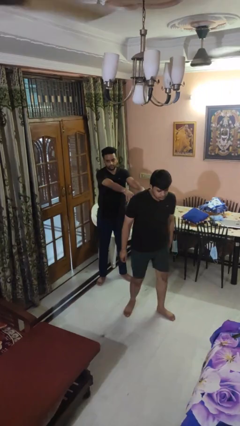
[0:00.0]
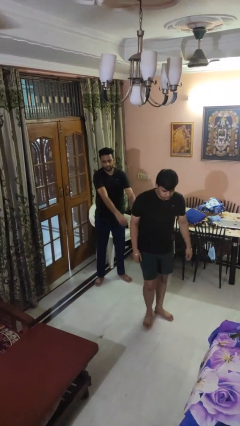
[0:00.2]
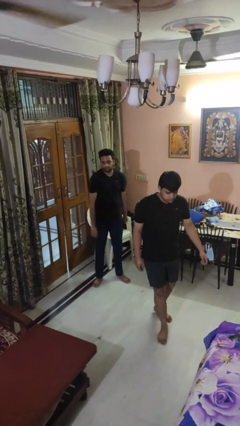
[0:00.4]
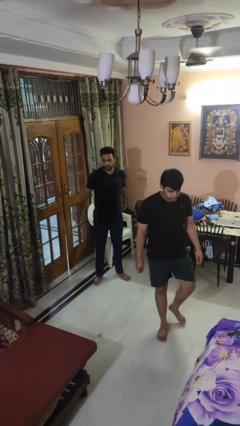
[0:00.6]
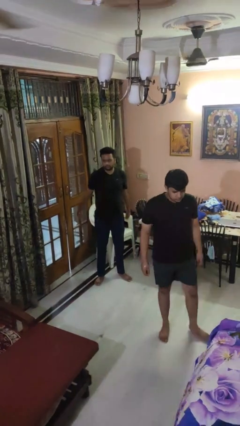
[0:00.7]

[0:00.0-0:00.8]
person shoves person

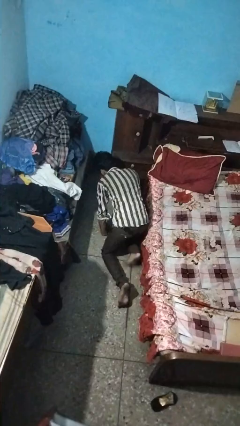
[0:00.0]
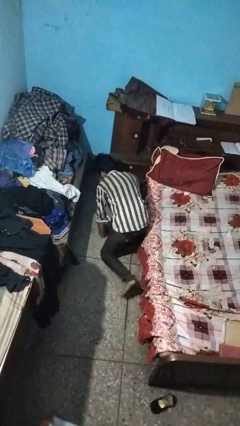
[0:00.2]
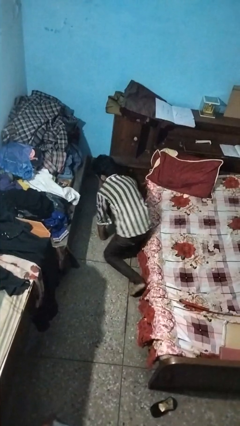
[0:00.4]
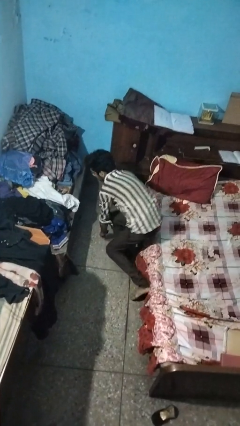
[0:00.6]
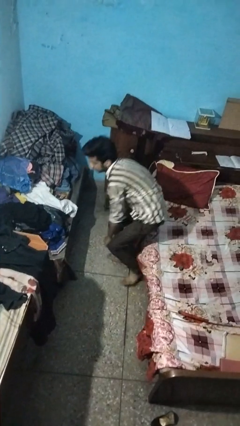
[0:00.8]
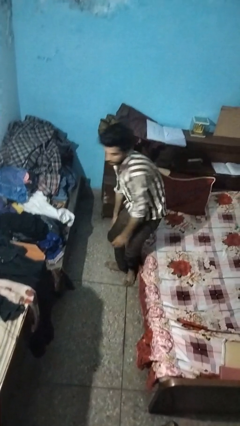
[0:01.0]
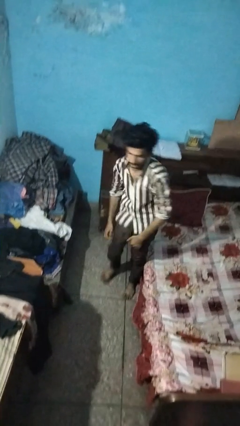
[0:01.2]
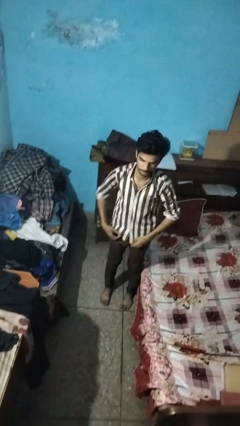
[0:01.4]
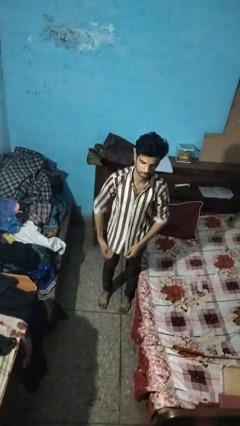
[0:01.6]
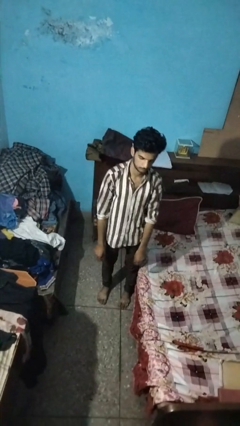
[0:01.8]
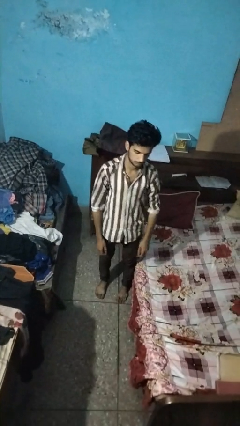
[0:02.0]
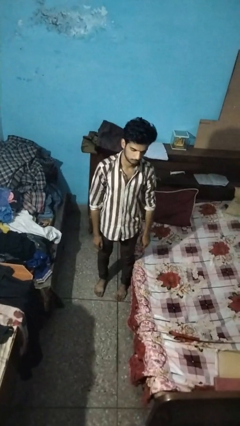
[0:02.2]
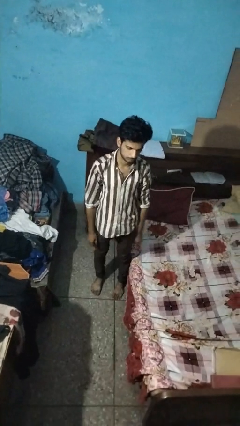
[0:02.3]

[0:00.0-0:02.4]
person stands up from floor

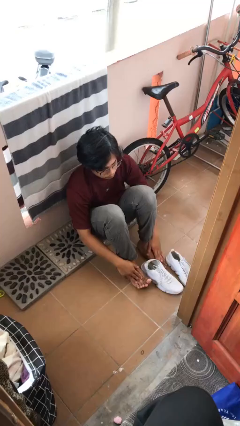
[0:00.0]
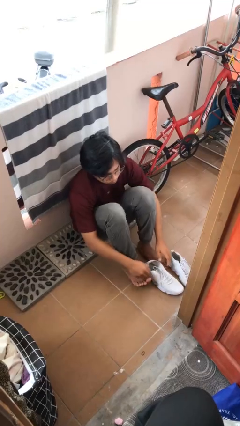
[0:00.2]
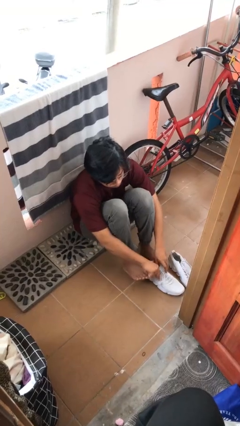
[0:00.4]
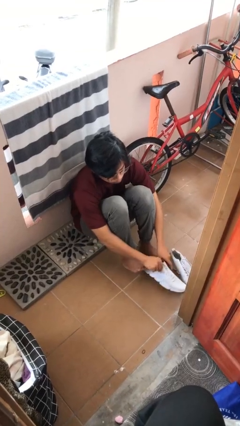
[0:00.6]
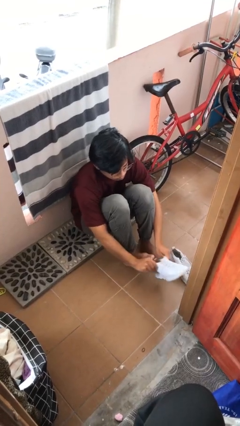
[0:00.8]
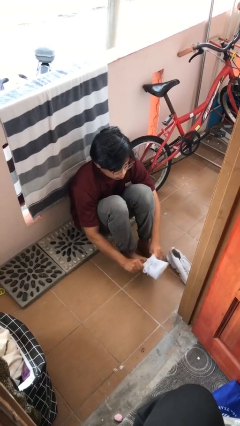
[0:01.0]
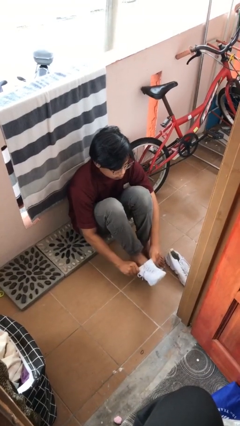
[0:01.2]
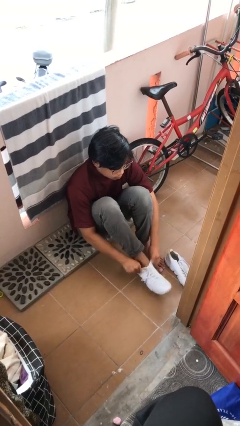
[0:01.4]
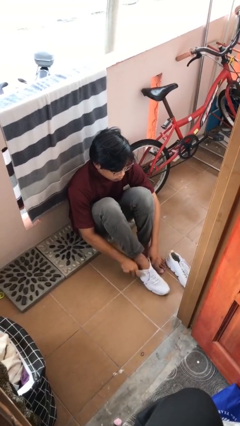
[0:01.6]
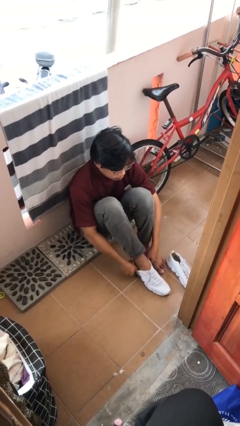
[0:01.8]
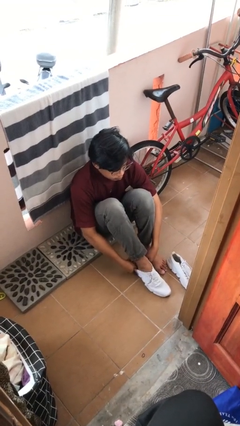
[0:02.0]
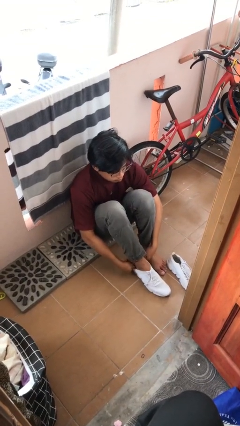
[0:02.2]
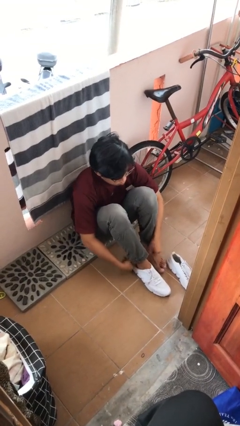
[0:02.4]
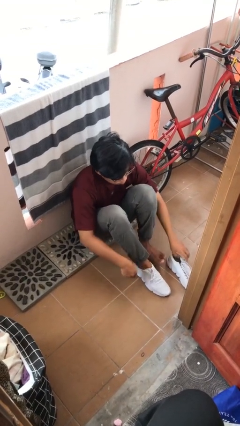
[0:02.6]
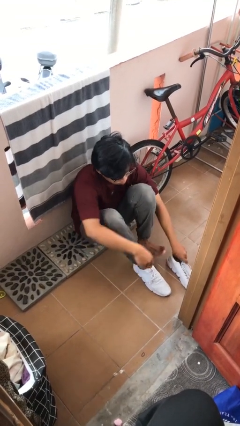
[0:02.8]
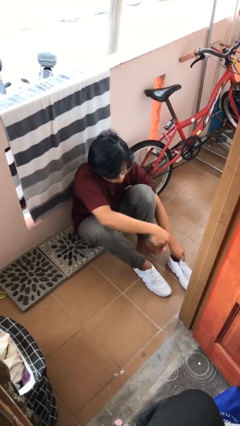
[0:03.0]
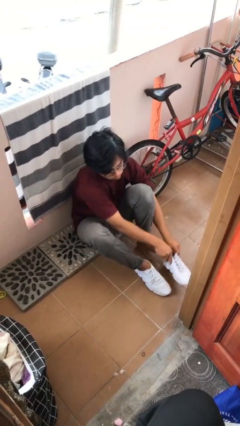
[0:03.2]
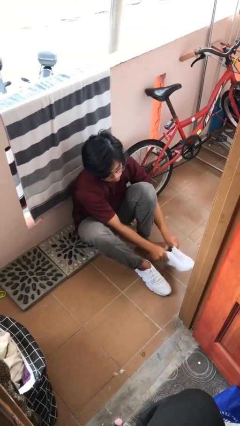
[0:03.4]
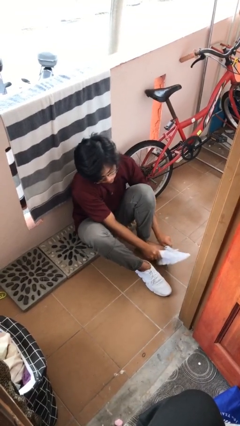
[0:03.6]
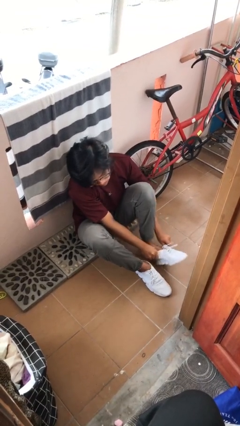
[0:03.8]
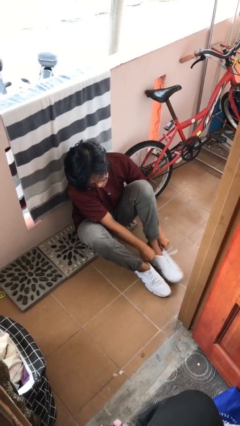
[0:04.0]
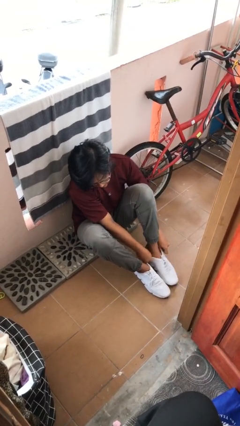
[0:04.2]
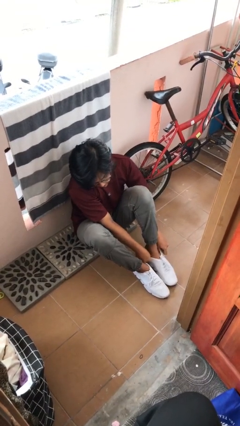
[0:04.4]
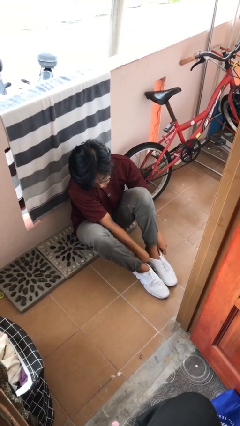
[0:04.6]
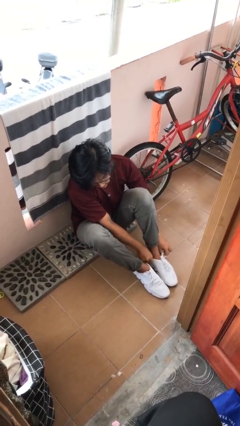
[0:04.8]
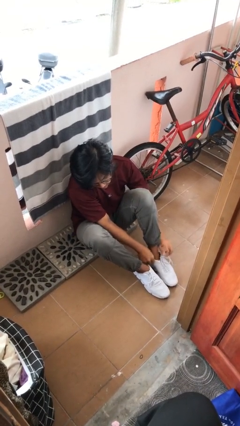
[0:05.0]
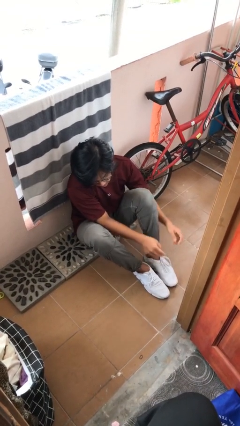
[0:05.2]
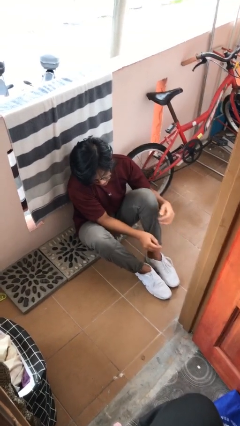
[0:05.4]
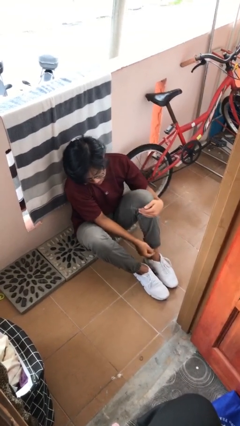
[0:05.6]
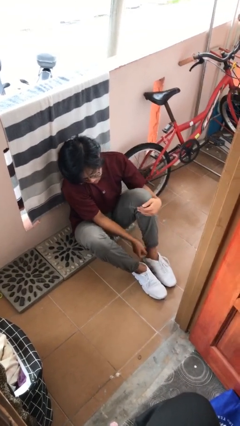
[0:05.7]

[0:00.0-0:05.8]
person puts on shoes

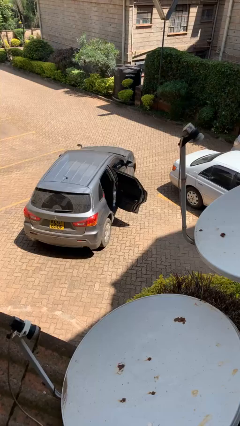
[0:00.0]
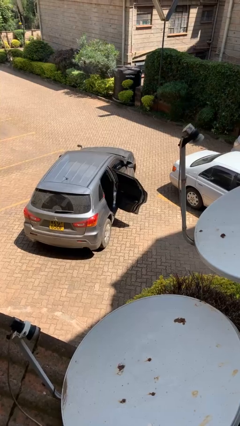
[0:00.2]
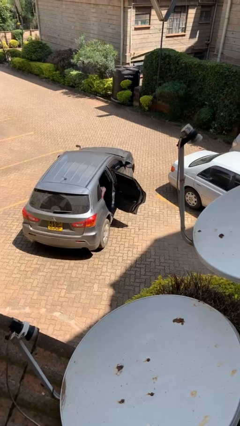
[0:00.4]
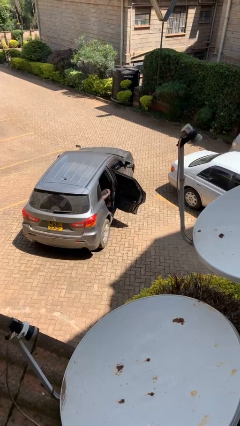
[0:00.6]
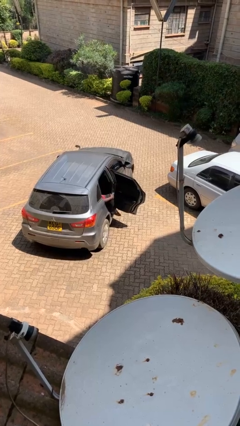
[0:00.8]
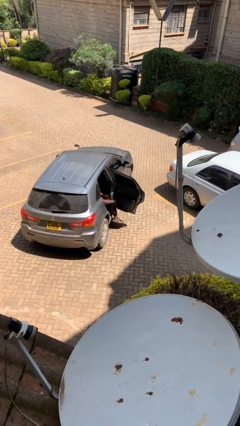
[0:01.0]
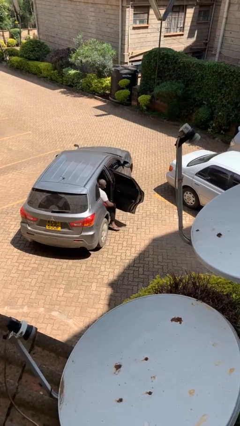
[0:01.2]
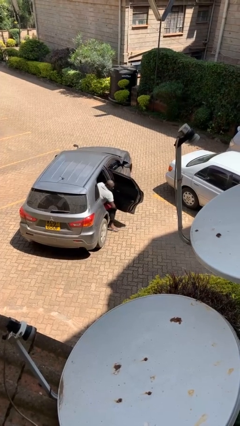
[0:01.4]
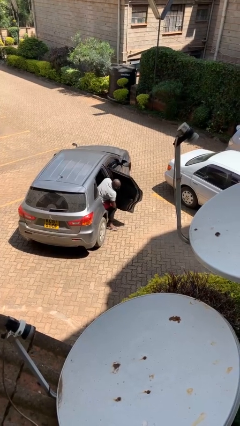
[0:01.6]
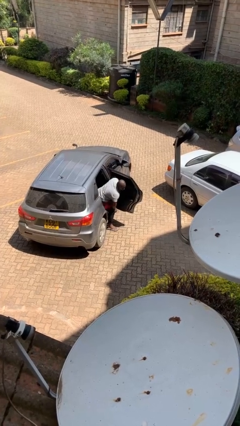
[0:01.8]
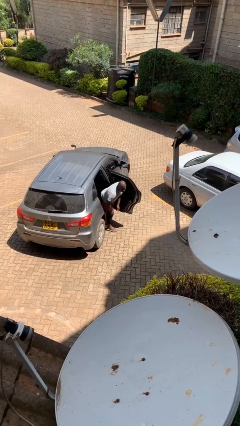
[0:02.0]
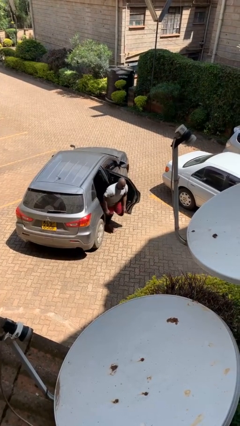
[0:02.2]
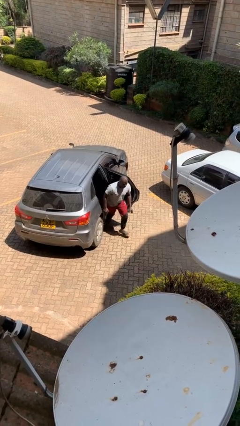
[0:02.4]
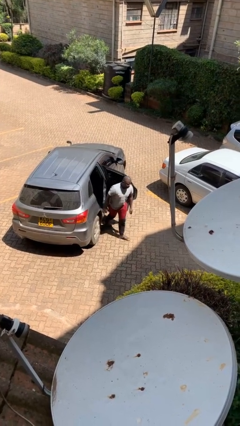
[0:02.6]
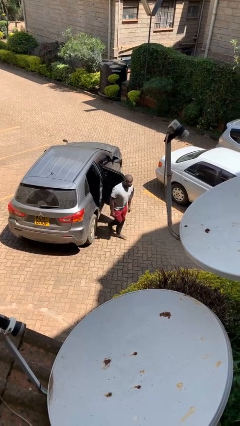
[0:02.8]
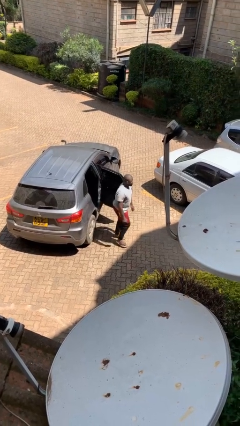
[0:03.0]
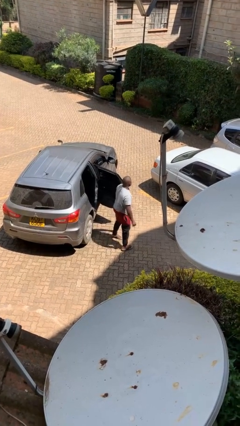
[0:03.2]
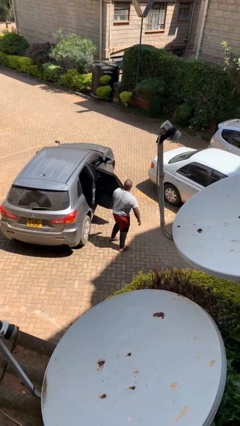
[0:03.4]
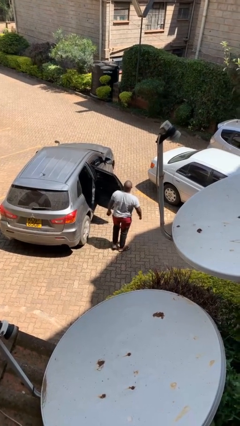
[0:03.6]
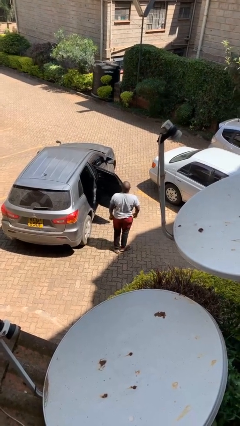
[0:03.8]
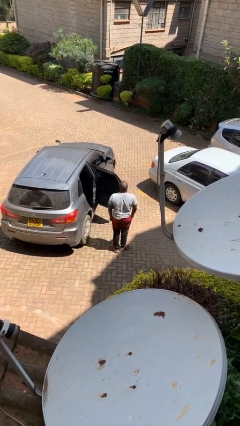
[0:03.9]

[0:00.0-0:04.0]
person exits car

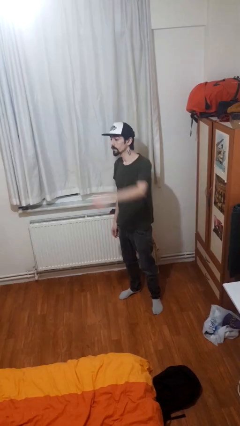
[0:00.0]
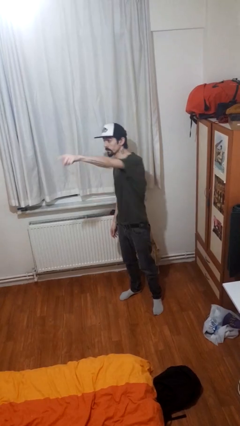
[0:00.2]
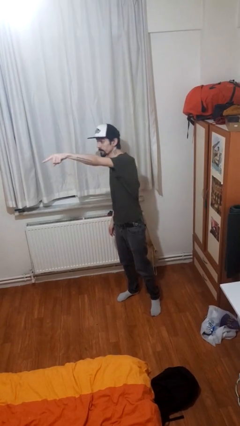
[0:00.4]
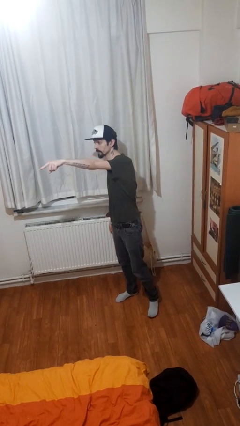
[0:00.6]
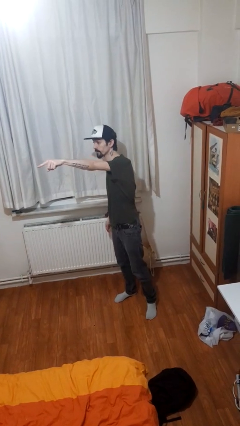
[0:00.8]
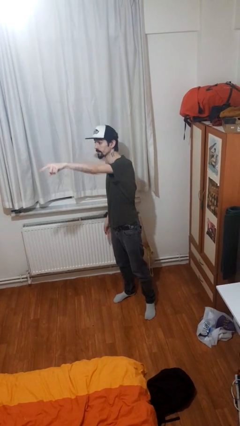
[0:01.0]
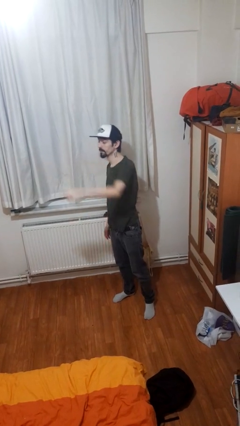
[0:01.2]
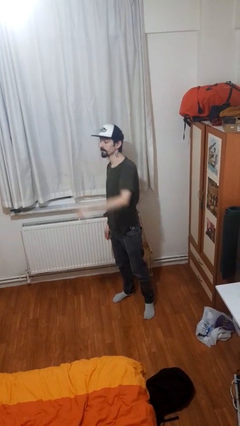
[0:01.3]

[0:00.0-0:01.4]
person points at person

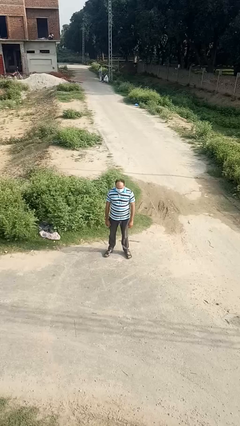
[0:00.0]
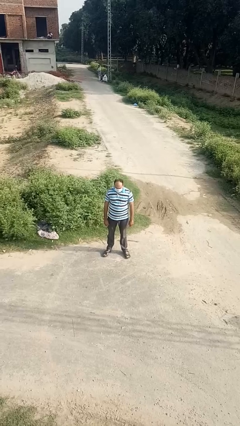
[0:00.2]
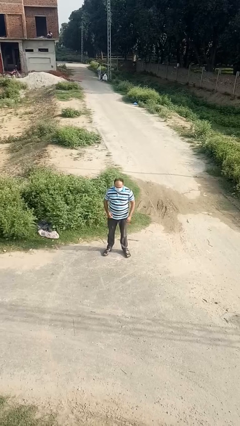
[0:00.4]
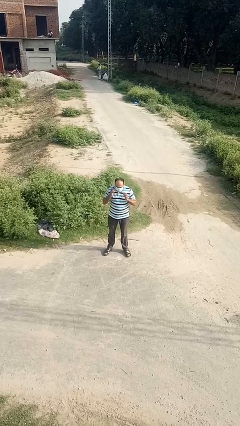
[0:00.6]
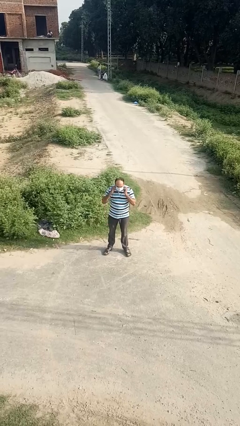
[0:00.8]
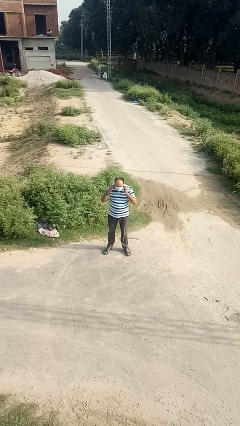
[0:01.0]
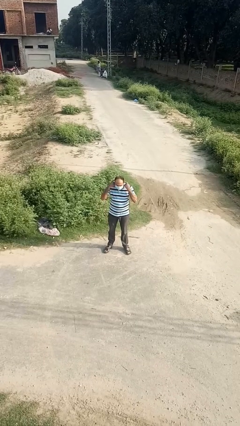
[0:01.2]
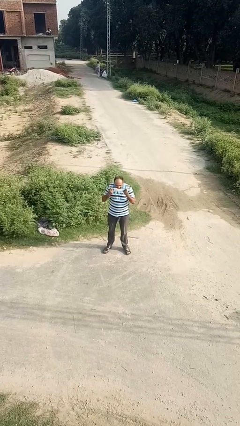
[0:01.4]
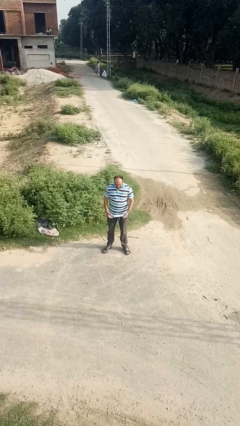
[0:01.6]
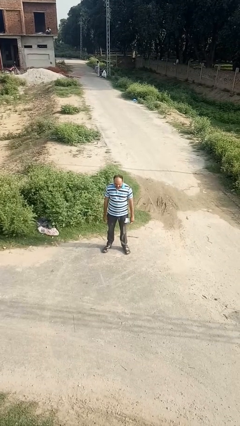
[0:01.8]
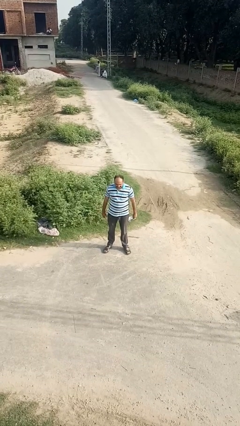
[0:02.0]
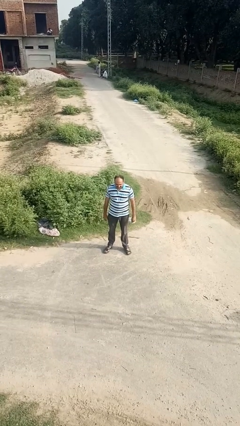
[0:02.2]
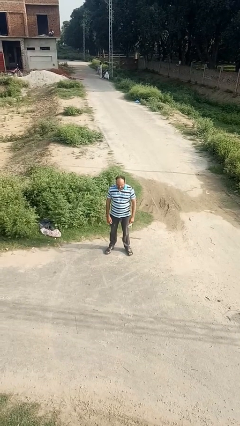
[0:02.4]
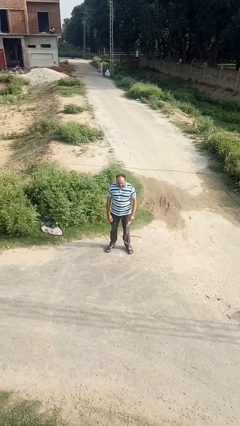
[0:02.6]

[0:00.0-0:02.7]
person takes off facemask

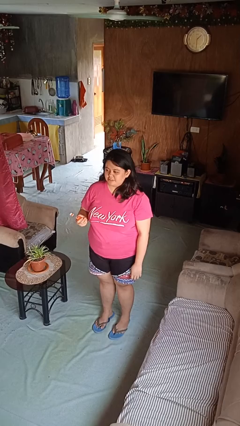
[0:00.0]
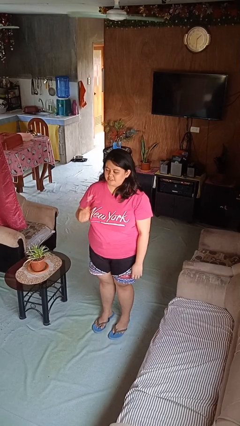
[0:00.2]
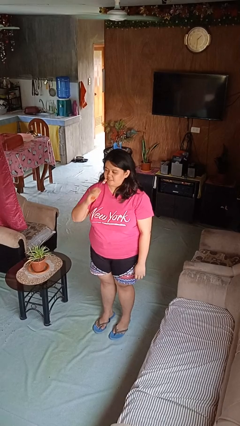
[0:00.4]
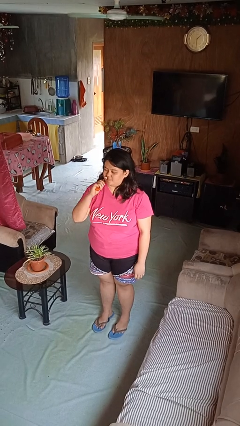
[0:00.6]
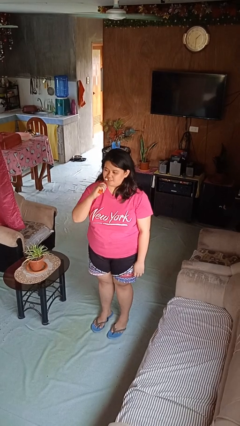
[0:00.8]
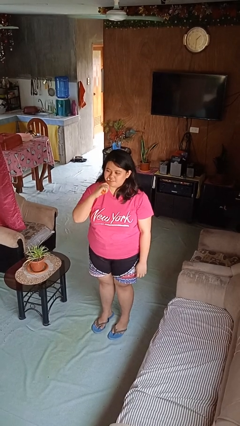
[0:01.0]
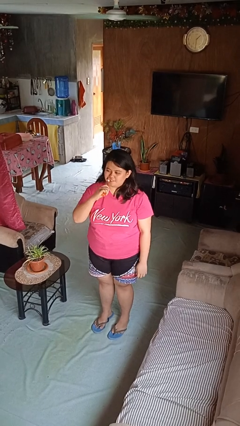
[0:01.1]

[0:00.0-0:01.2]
person brushes teeth
